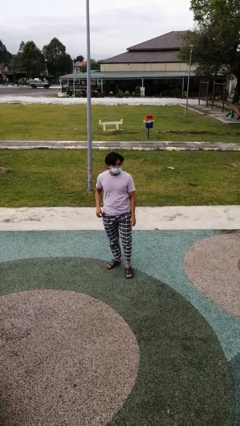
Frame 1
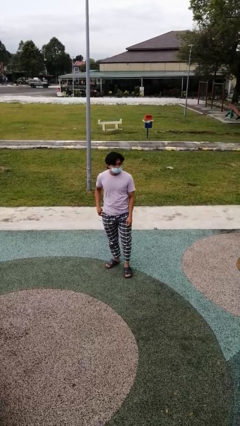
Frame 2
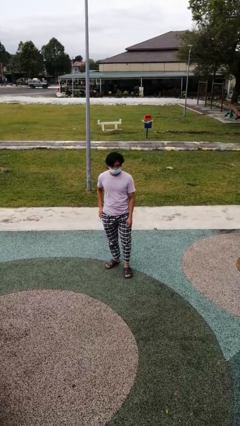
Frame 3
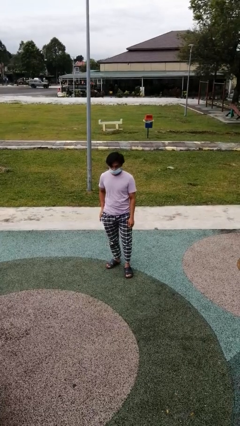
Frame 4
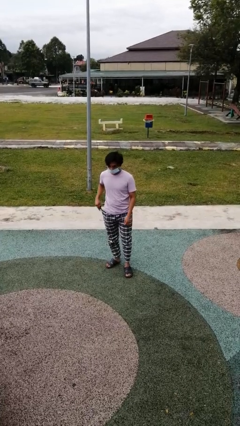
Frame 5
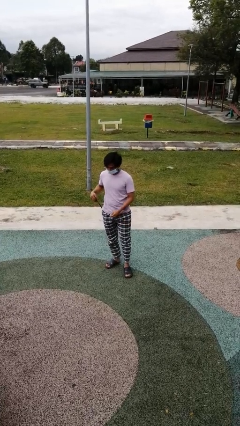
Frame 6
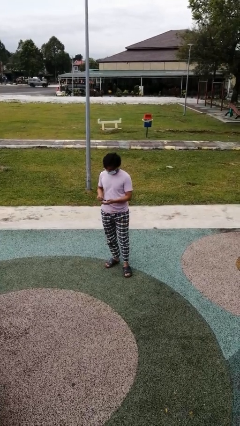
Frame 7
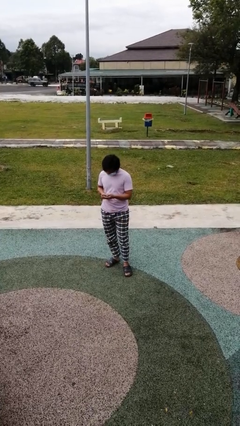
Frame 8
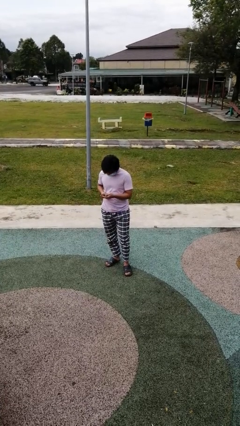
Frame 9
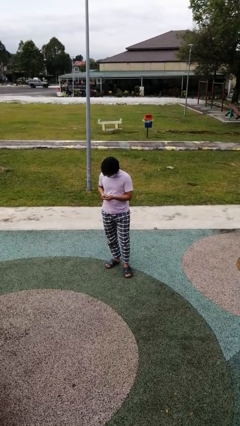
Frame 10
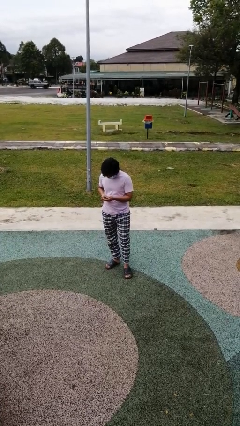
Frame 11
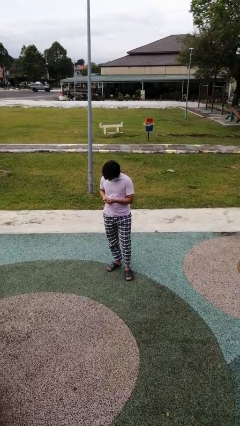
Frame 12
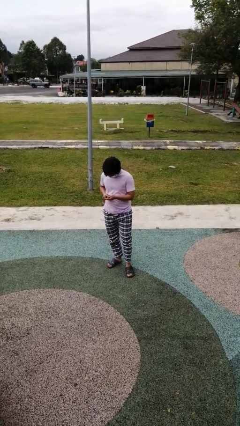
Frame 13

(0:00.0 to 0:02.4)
person takes phone from pocket

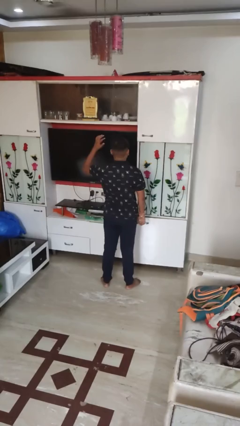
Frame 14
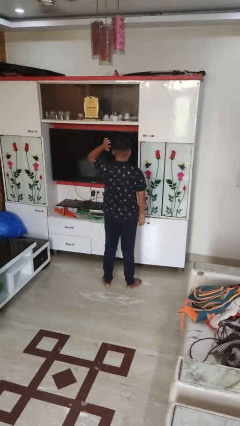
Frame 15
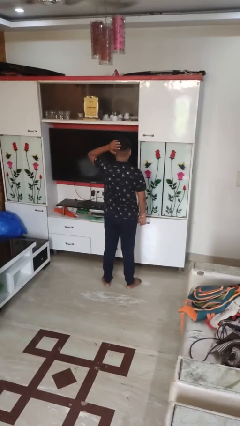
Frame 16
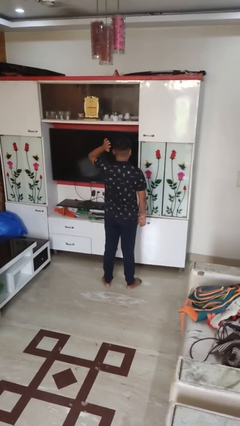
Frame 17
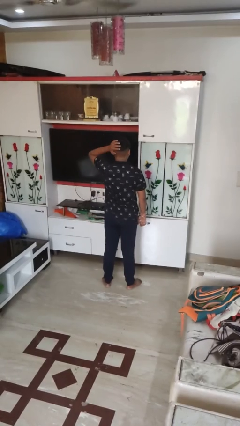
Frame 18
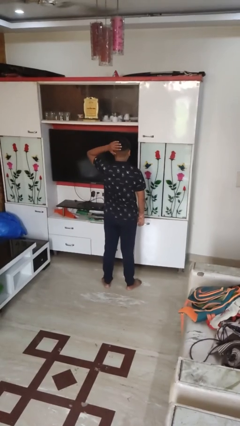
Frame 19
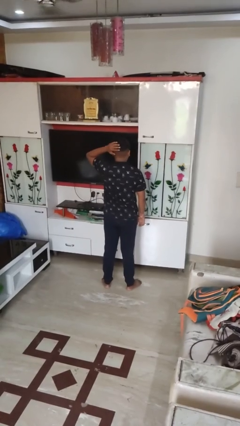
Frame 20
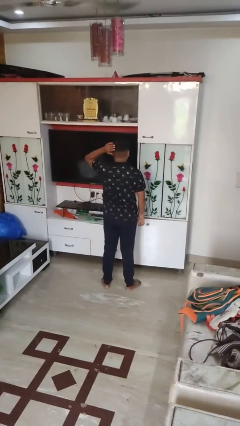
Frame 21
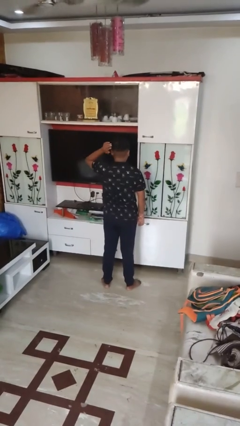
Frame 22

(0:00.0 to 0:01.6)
person pats head

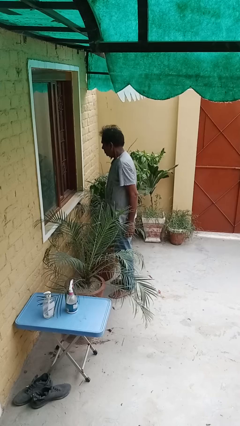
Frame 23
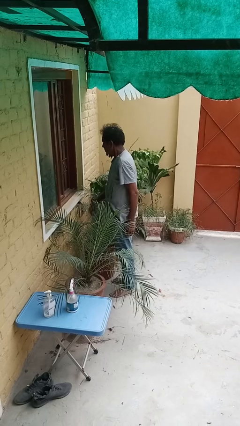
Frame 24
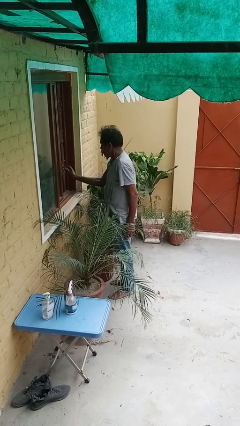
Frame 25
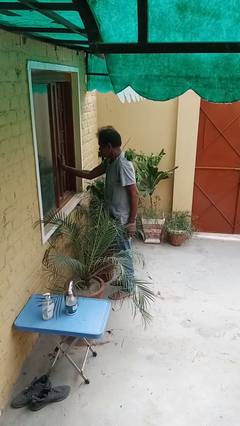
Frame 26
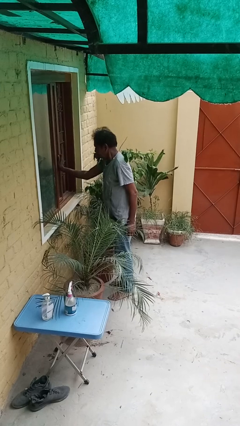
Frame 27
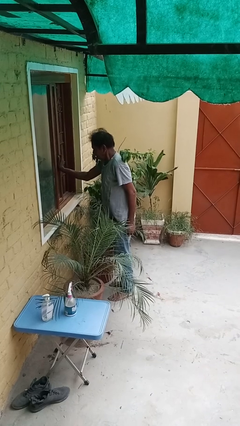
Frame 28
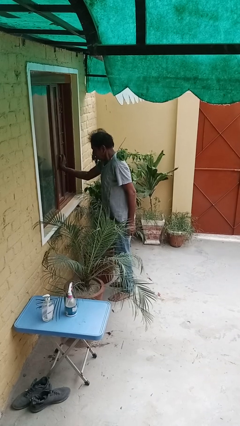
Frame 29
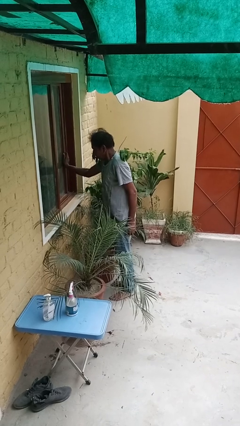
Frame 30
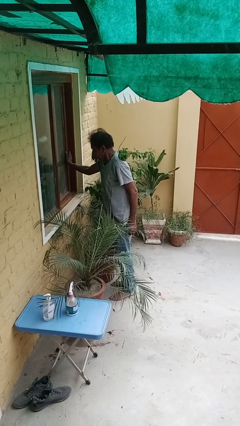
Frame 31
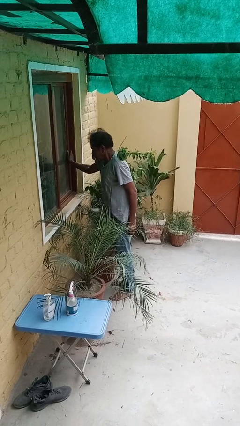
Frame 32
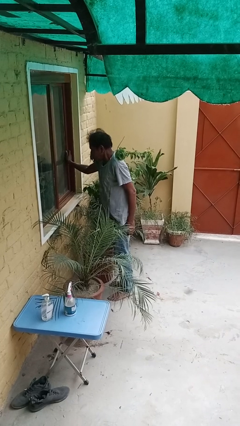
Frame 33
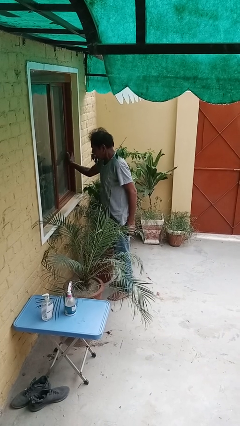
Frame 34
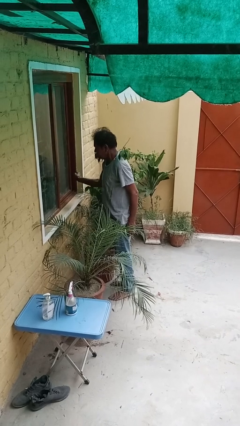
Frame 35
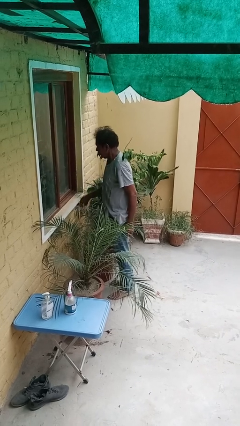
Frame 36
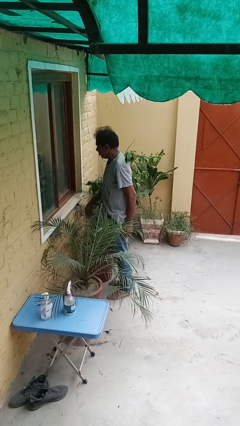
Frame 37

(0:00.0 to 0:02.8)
person closes home window

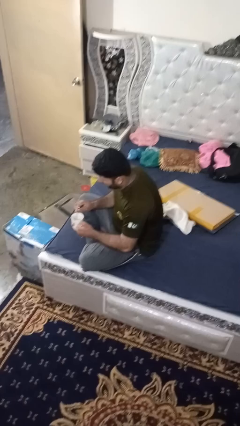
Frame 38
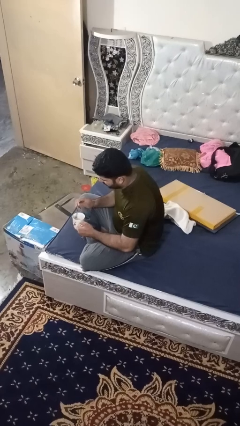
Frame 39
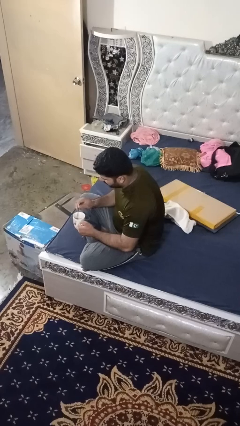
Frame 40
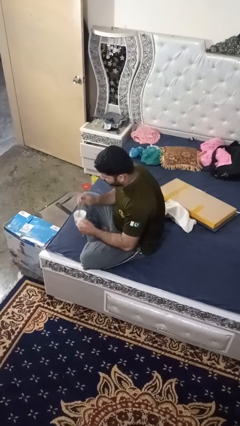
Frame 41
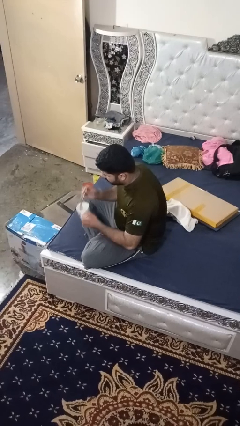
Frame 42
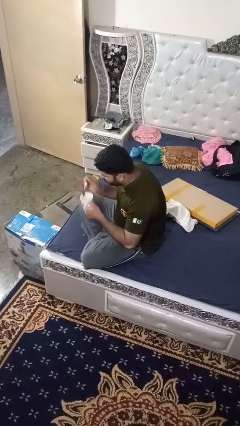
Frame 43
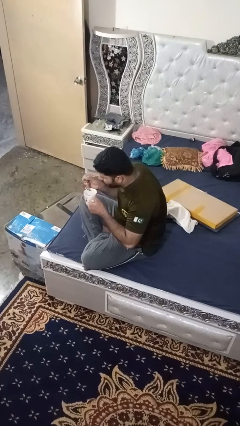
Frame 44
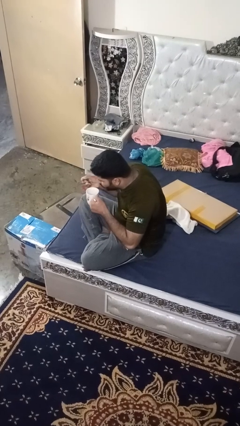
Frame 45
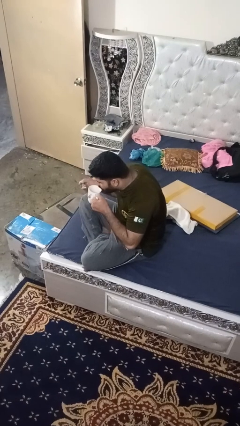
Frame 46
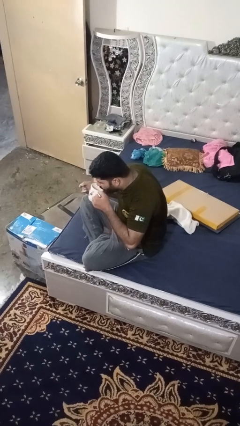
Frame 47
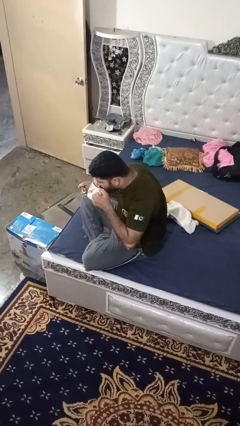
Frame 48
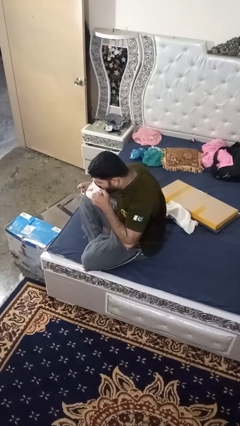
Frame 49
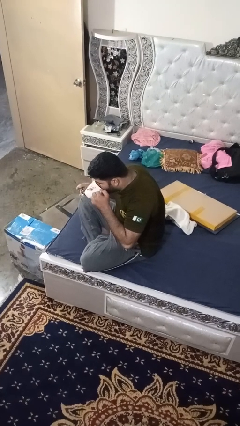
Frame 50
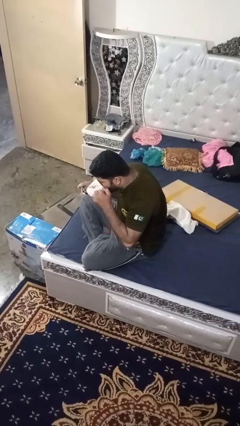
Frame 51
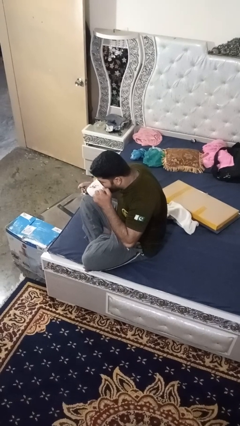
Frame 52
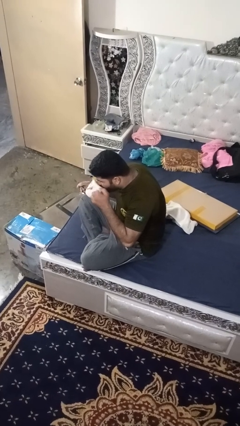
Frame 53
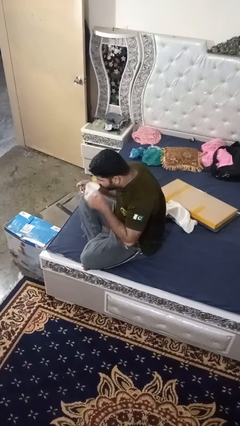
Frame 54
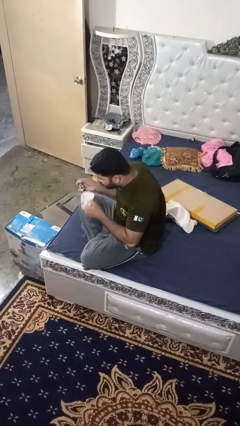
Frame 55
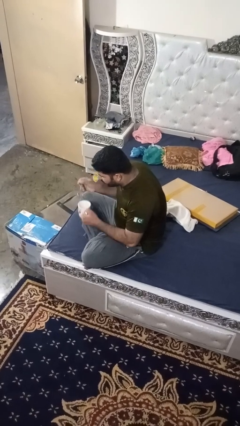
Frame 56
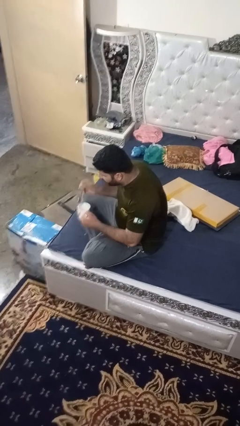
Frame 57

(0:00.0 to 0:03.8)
person drinks from mug

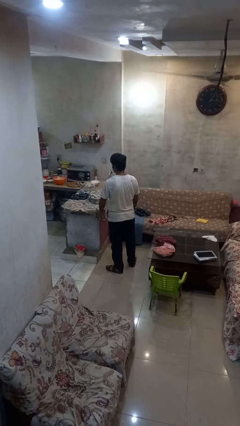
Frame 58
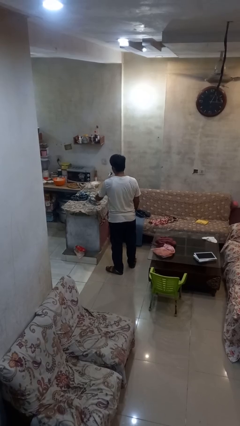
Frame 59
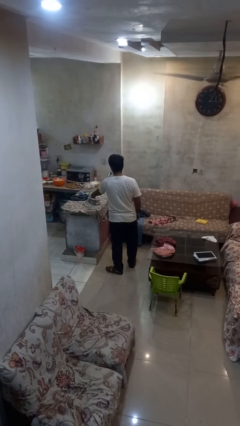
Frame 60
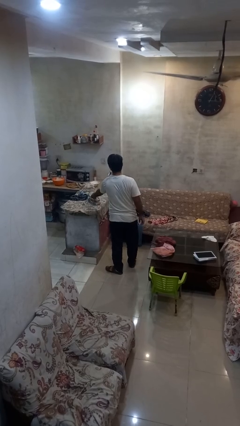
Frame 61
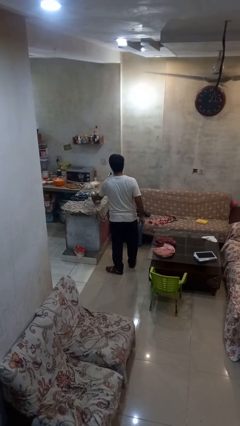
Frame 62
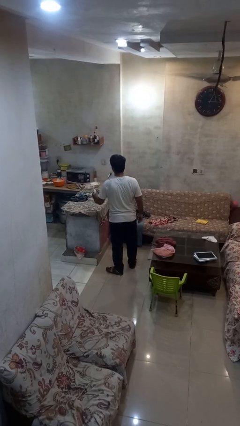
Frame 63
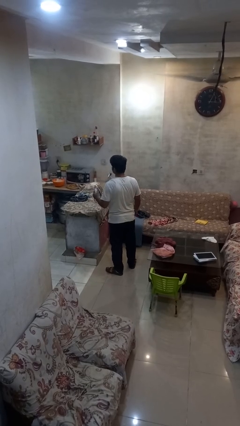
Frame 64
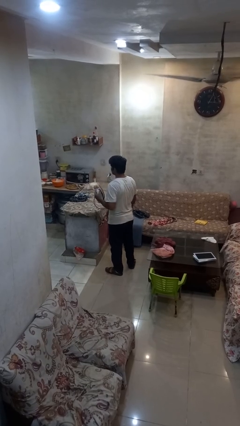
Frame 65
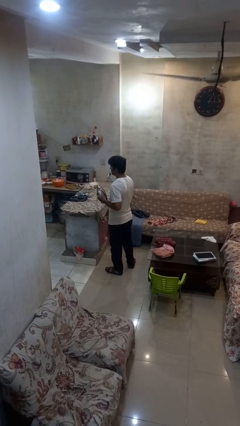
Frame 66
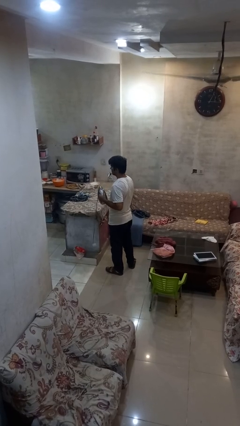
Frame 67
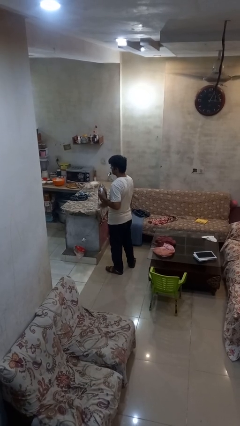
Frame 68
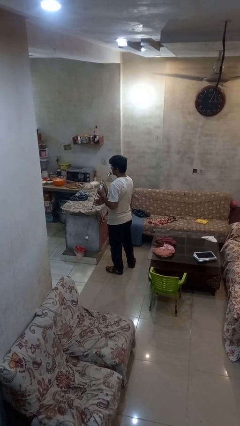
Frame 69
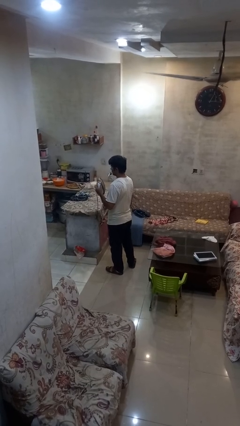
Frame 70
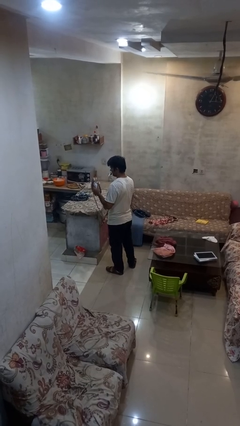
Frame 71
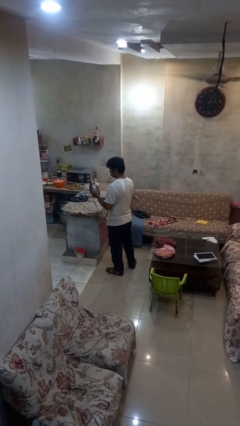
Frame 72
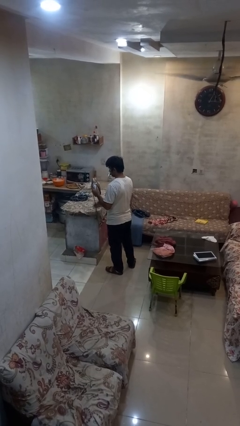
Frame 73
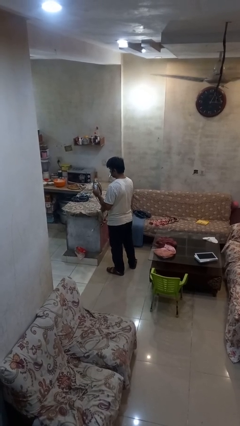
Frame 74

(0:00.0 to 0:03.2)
person picks up object from countertop

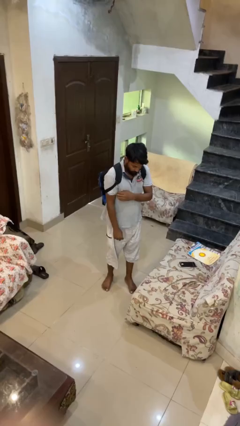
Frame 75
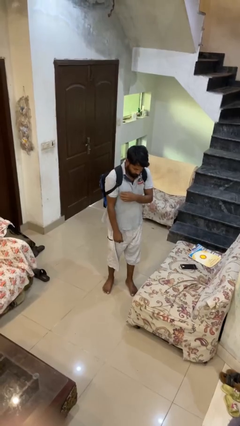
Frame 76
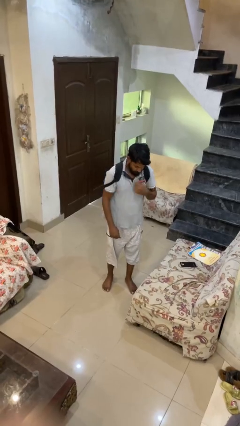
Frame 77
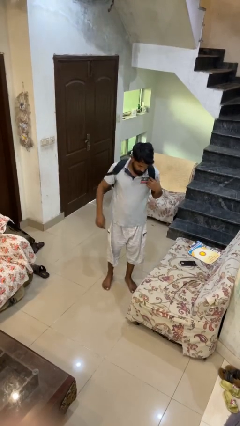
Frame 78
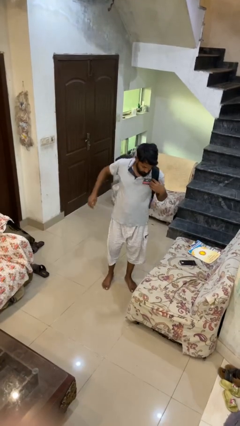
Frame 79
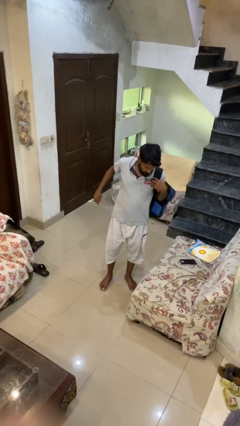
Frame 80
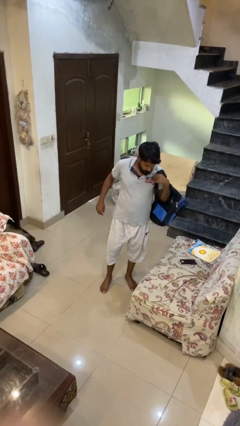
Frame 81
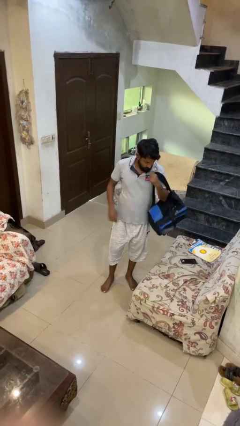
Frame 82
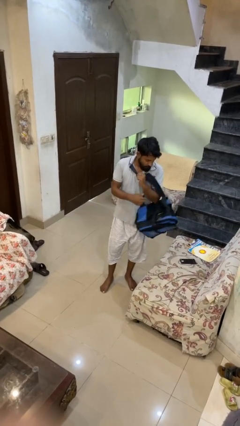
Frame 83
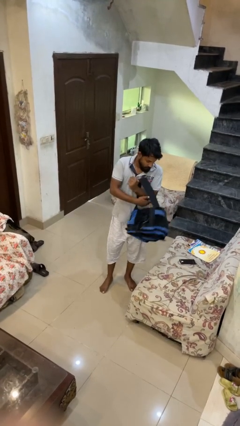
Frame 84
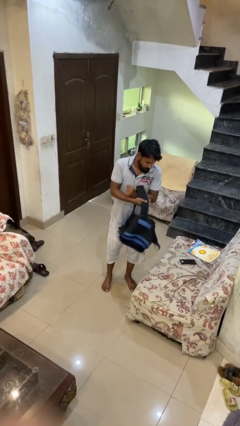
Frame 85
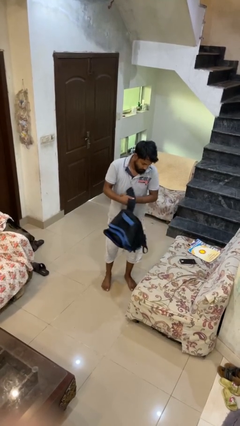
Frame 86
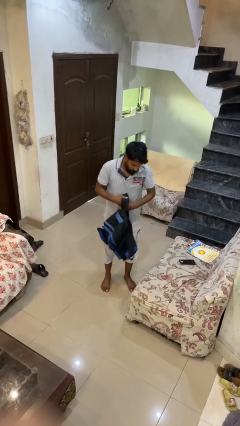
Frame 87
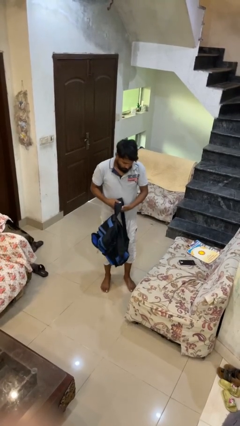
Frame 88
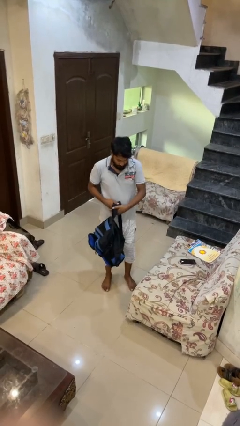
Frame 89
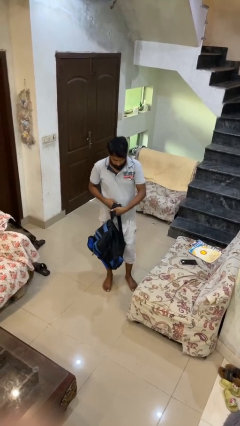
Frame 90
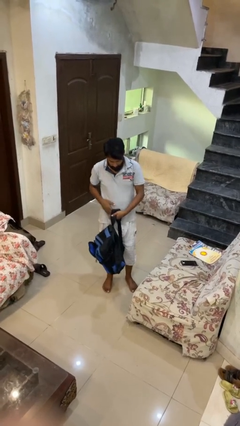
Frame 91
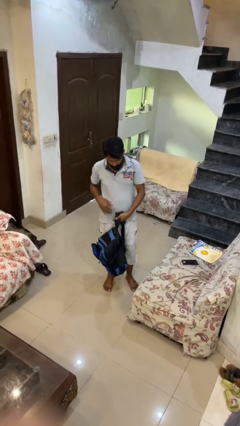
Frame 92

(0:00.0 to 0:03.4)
person takes off backpack

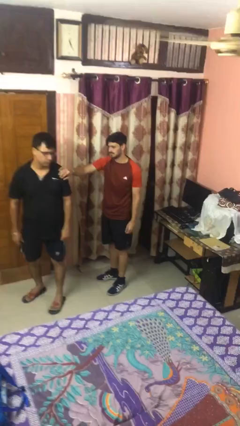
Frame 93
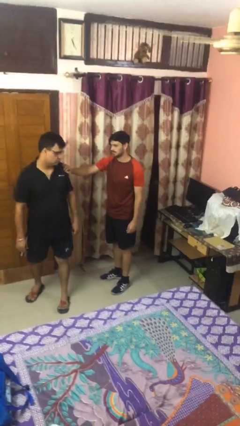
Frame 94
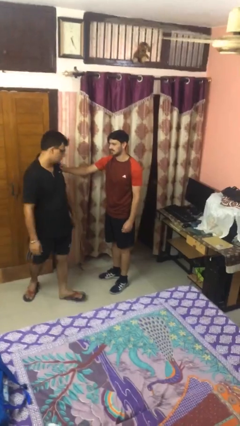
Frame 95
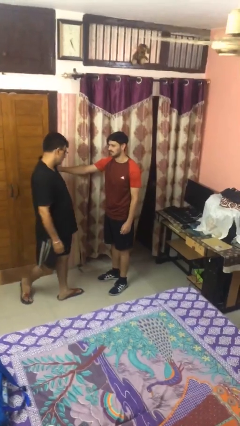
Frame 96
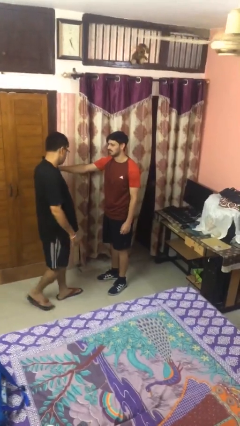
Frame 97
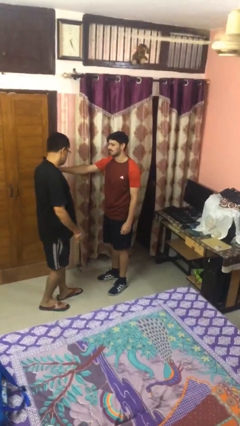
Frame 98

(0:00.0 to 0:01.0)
person spins person around
